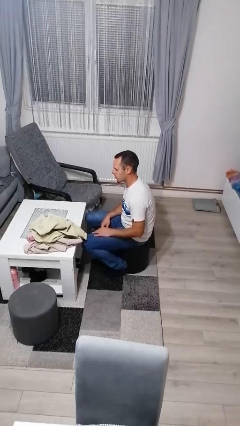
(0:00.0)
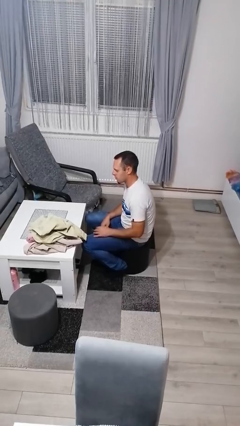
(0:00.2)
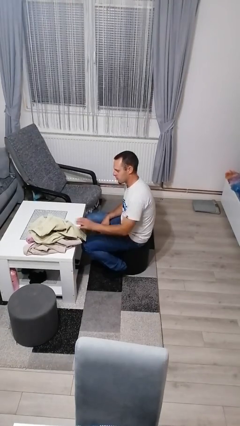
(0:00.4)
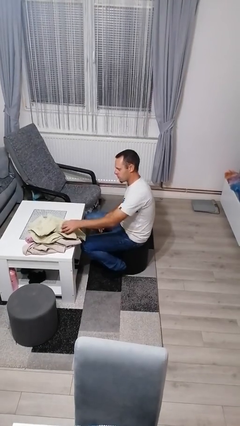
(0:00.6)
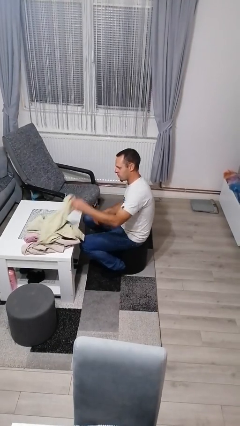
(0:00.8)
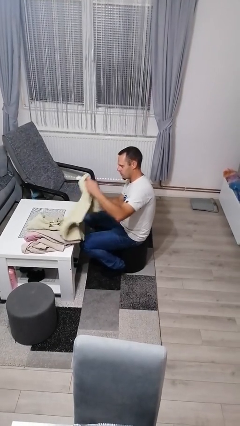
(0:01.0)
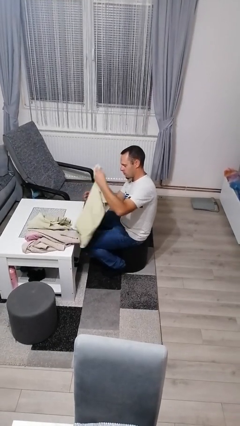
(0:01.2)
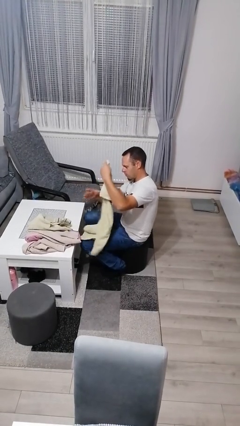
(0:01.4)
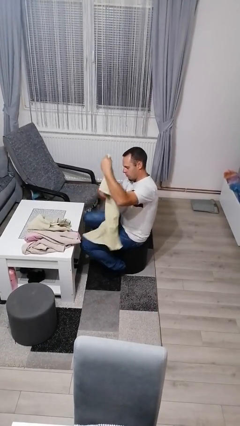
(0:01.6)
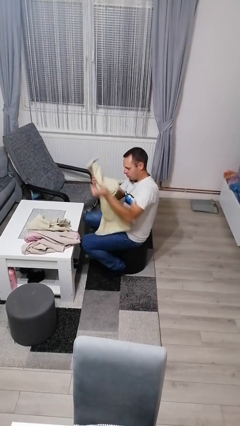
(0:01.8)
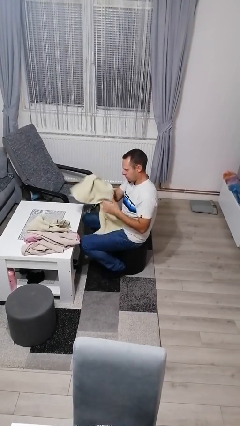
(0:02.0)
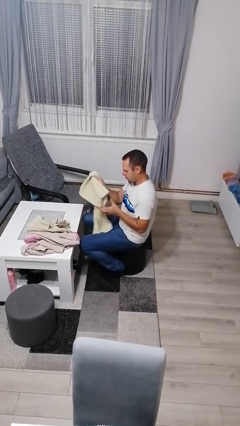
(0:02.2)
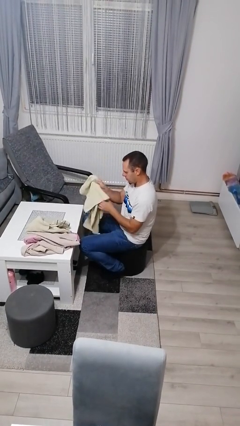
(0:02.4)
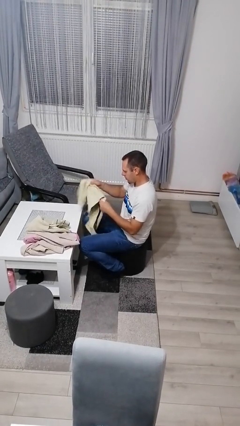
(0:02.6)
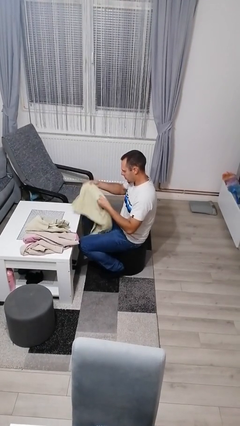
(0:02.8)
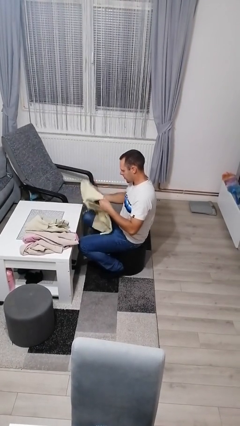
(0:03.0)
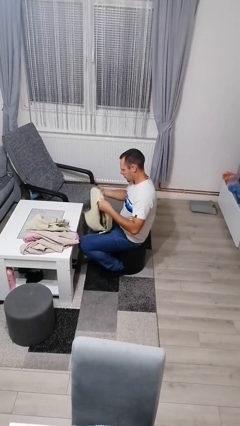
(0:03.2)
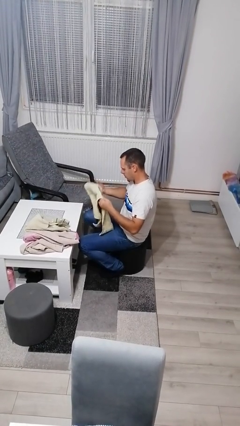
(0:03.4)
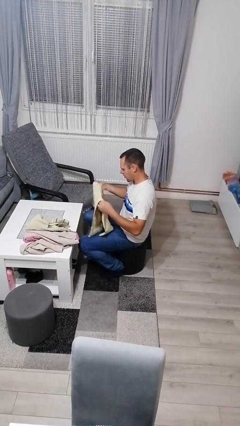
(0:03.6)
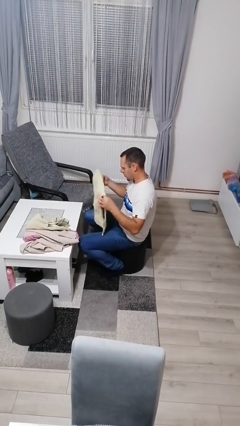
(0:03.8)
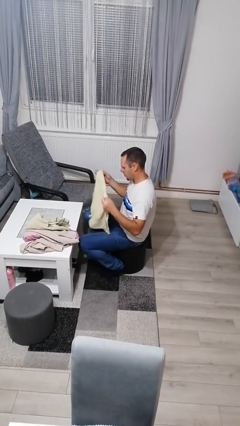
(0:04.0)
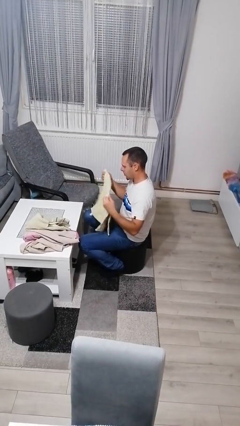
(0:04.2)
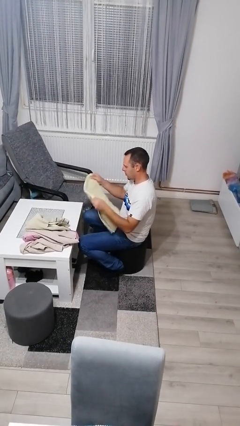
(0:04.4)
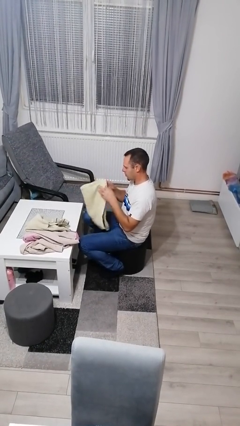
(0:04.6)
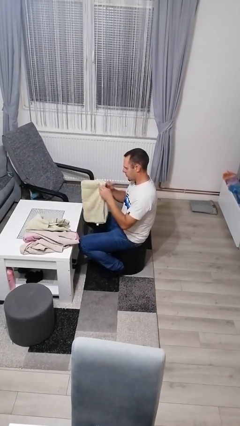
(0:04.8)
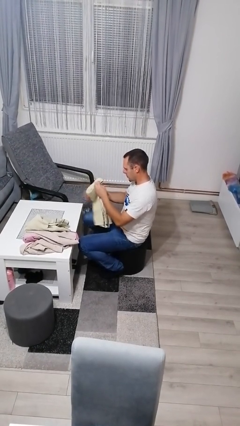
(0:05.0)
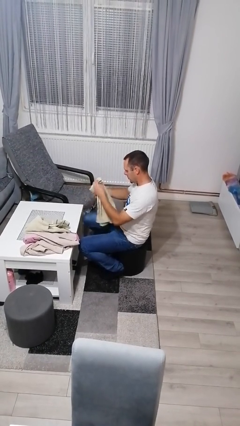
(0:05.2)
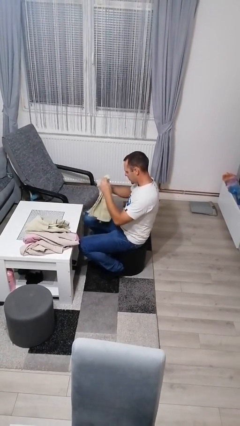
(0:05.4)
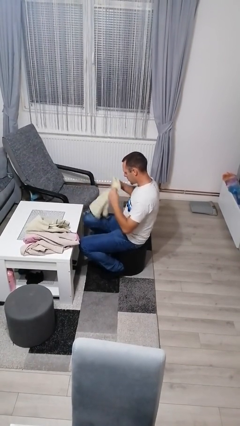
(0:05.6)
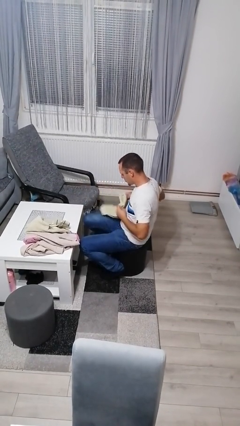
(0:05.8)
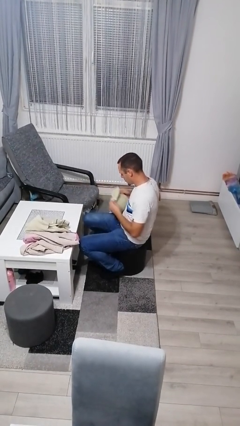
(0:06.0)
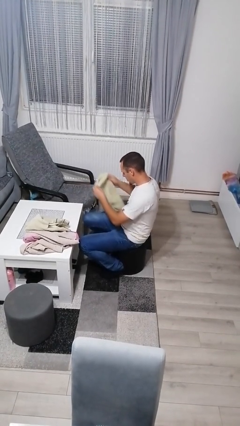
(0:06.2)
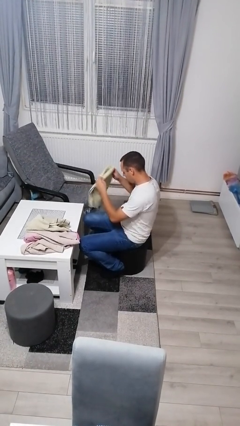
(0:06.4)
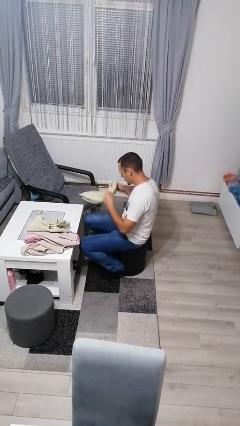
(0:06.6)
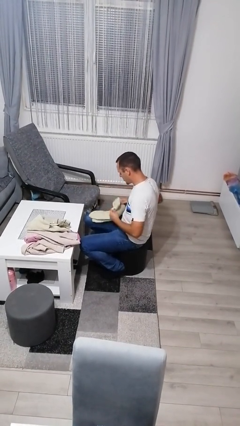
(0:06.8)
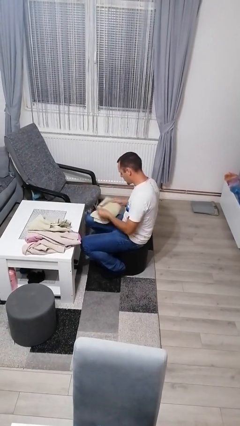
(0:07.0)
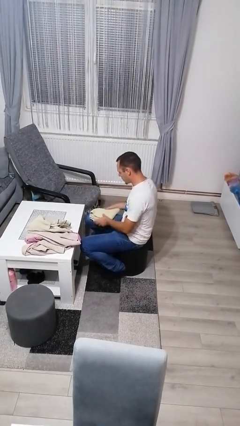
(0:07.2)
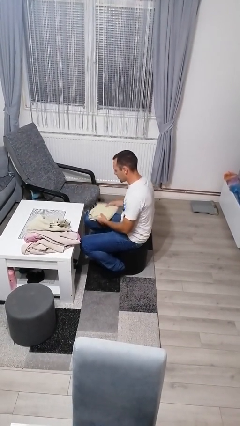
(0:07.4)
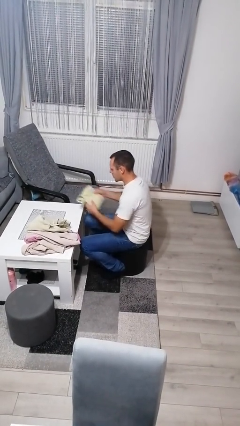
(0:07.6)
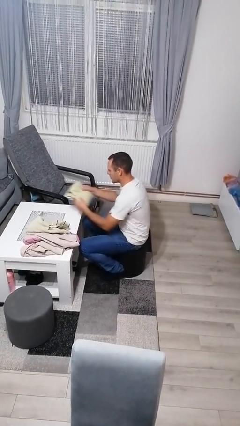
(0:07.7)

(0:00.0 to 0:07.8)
person folds towel

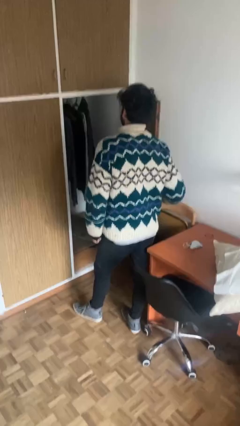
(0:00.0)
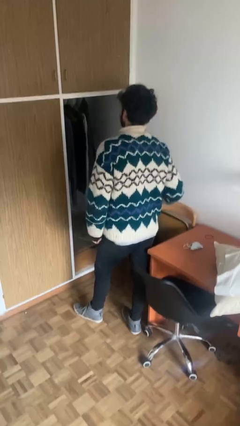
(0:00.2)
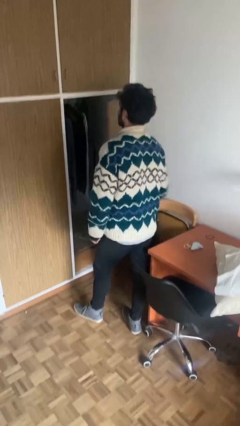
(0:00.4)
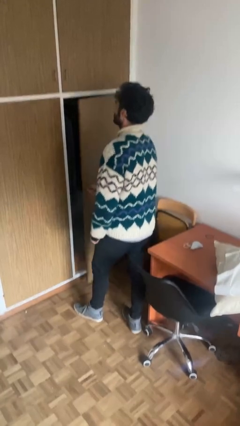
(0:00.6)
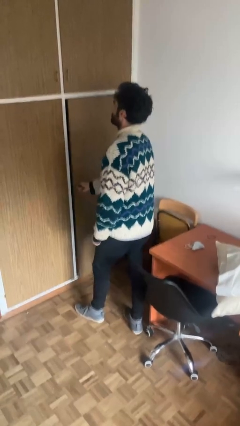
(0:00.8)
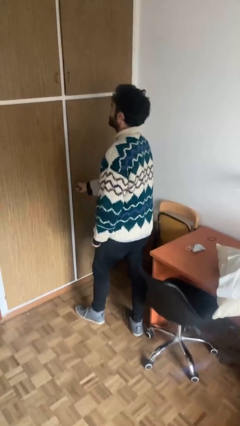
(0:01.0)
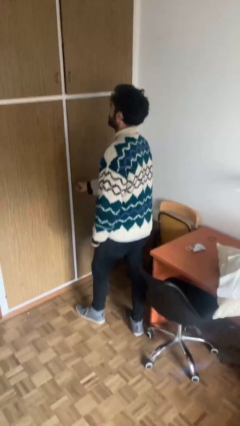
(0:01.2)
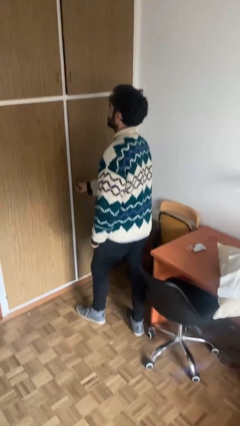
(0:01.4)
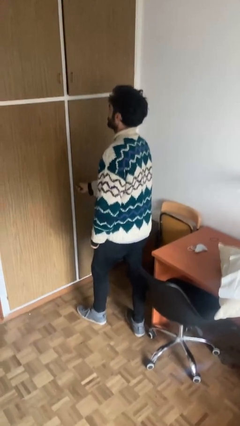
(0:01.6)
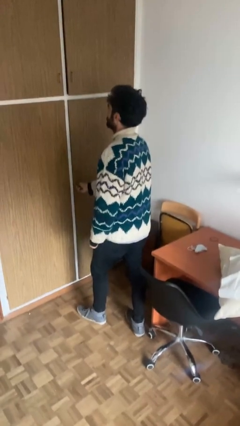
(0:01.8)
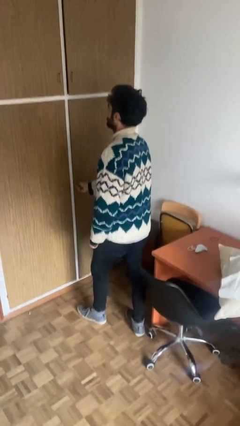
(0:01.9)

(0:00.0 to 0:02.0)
person closes closet door

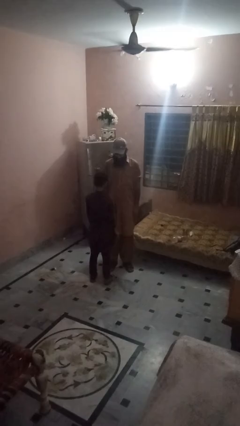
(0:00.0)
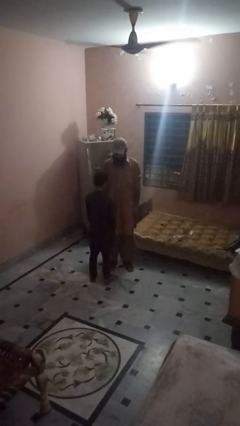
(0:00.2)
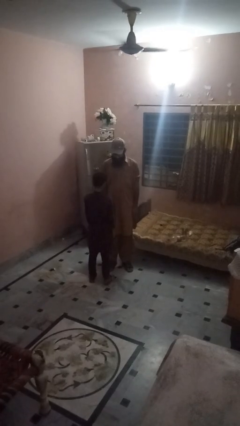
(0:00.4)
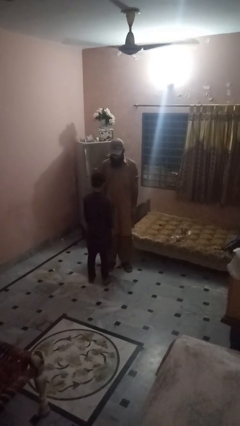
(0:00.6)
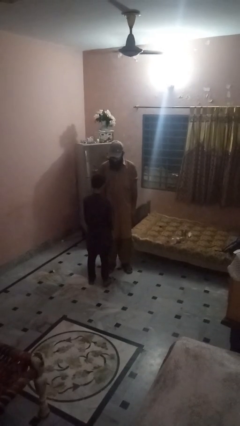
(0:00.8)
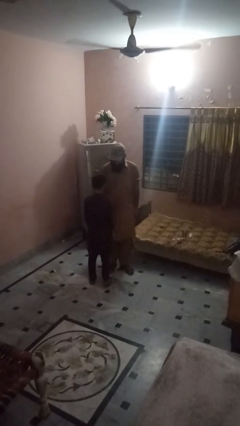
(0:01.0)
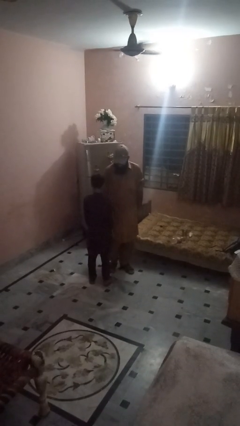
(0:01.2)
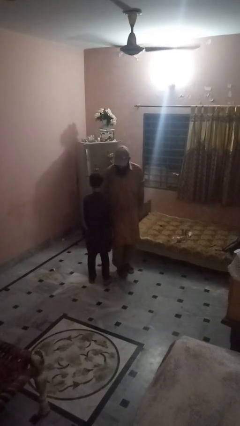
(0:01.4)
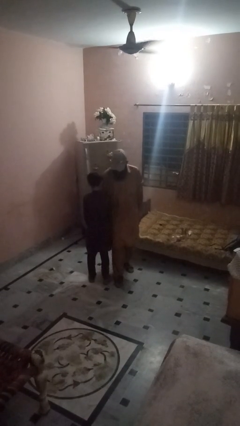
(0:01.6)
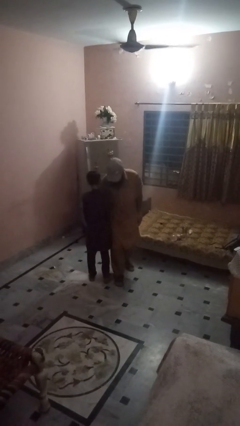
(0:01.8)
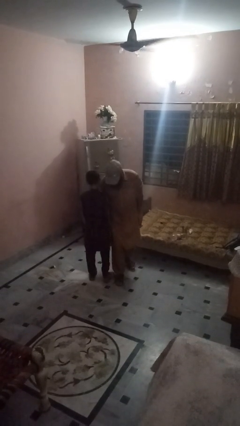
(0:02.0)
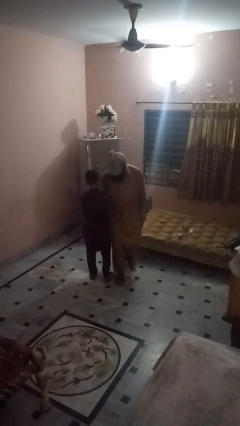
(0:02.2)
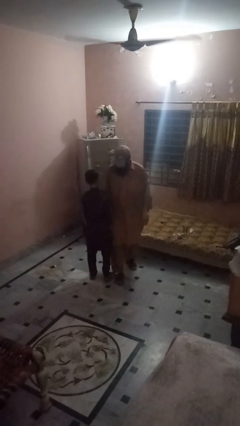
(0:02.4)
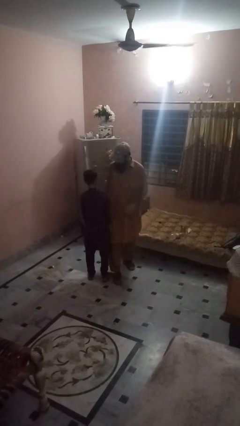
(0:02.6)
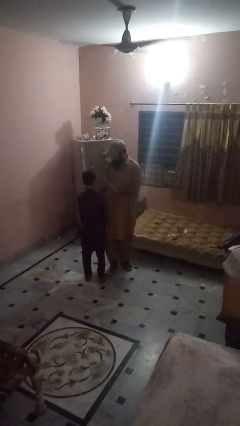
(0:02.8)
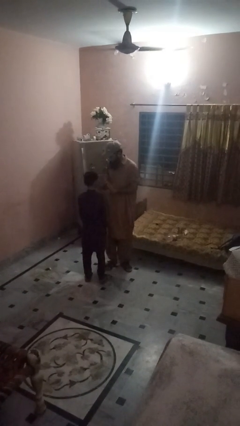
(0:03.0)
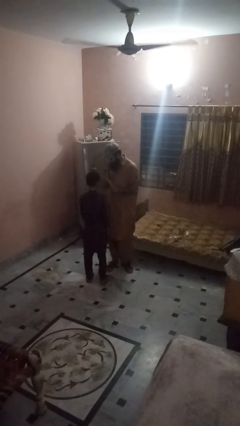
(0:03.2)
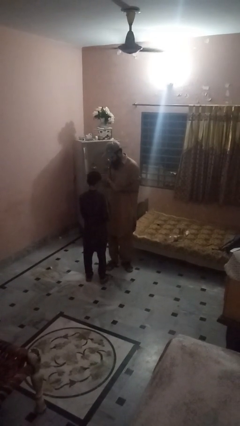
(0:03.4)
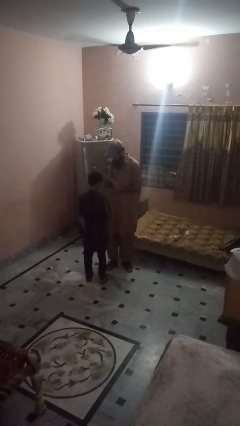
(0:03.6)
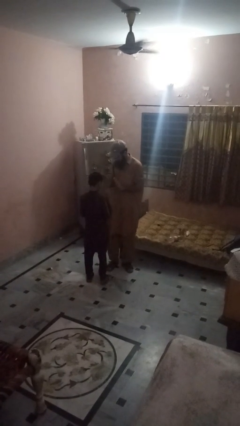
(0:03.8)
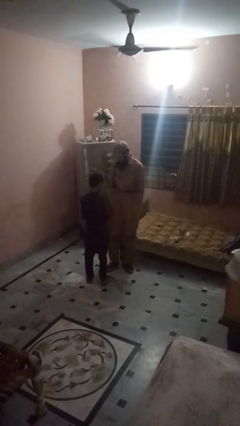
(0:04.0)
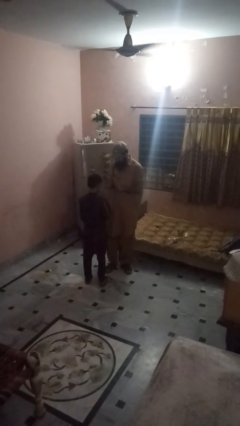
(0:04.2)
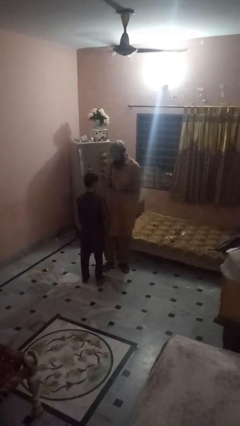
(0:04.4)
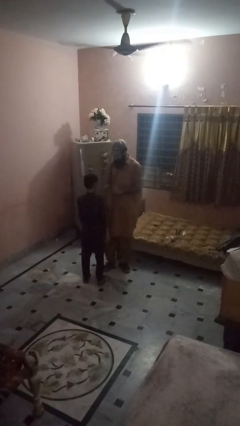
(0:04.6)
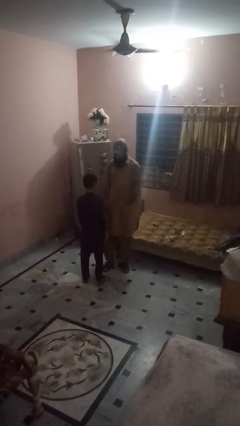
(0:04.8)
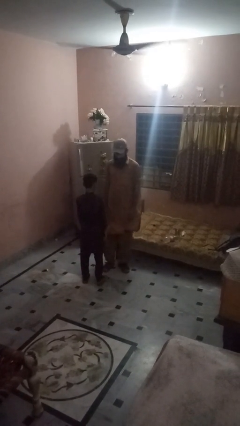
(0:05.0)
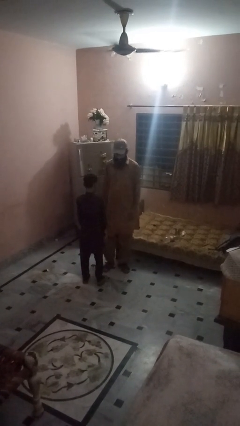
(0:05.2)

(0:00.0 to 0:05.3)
person bumps into person

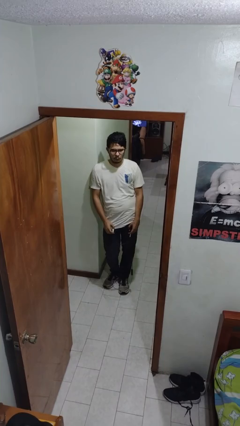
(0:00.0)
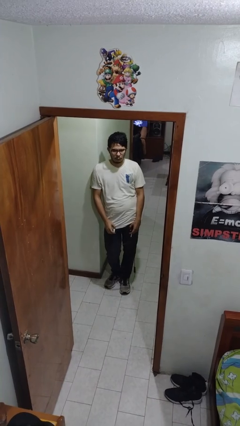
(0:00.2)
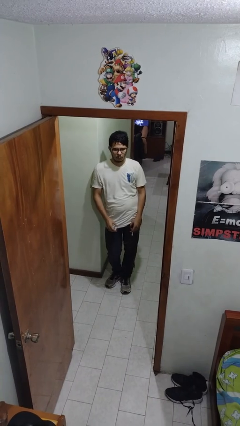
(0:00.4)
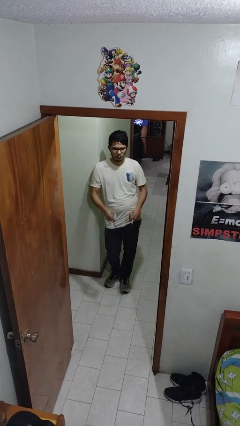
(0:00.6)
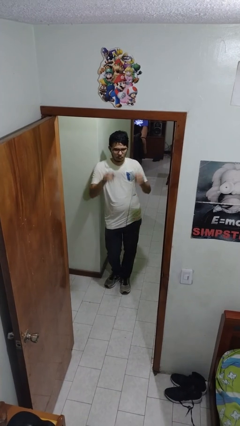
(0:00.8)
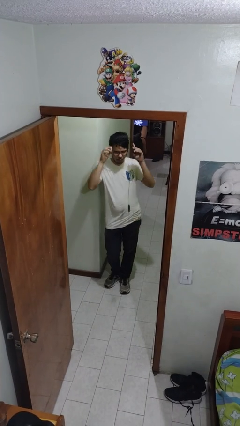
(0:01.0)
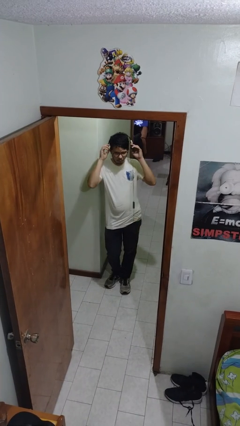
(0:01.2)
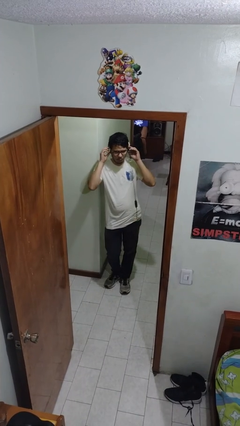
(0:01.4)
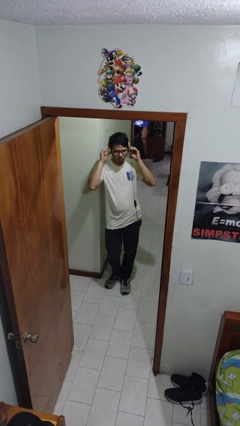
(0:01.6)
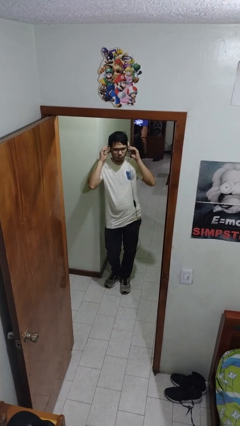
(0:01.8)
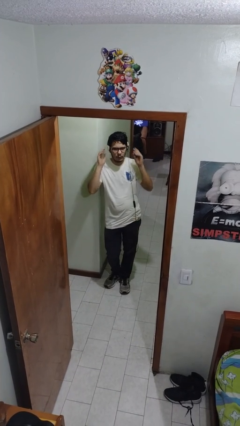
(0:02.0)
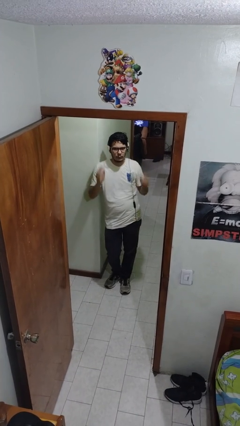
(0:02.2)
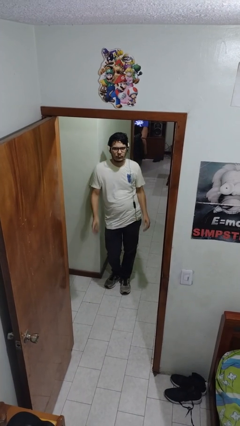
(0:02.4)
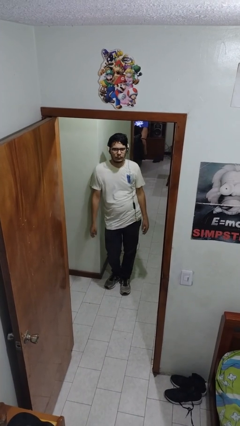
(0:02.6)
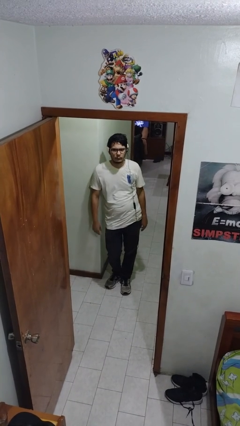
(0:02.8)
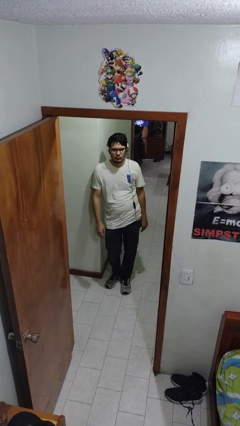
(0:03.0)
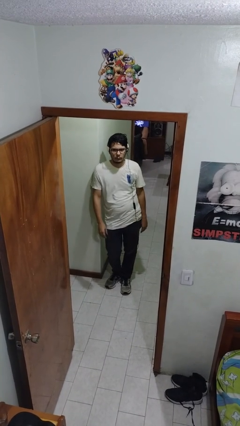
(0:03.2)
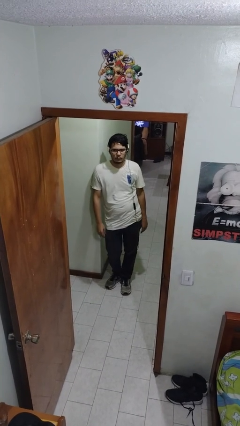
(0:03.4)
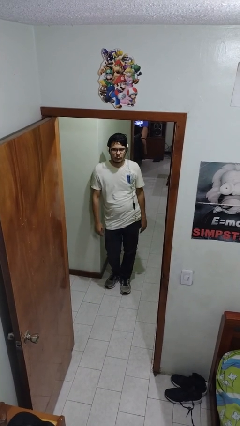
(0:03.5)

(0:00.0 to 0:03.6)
person puts on headphones
